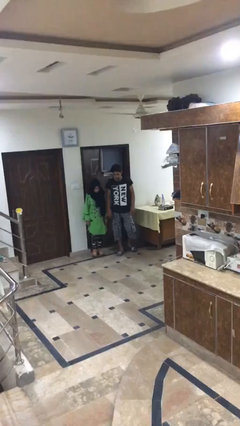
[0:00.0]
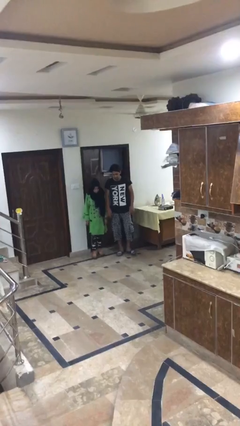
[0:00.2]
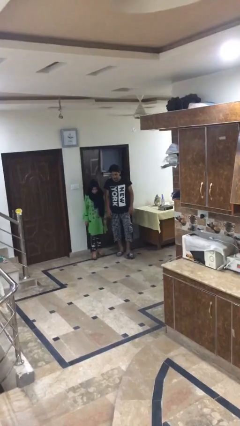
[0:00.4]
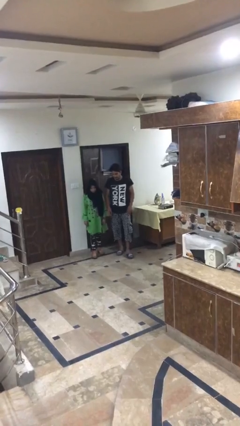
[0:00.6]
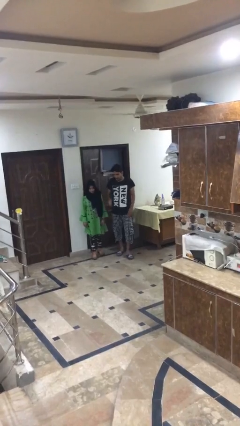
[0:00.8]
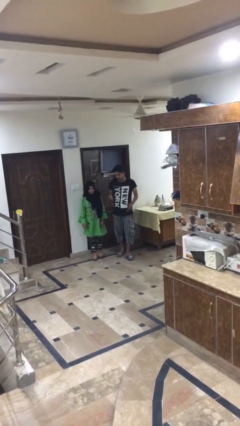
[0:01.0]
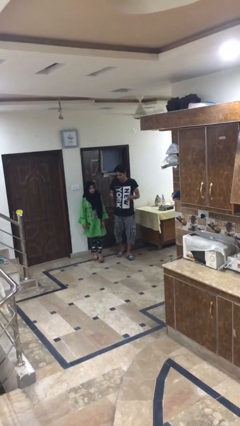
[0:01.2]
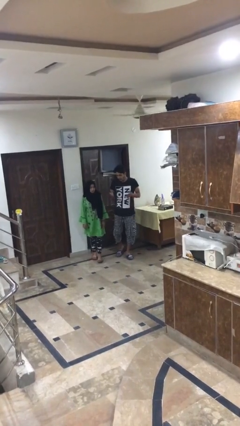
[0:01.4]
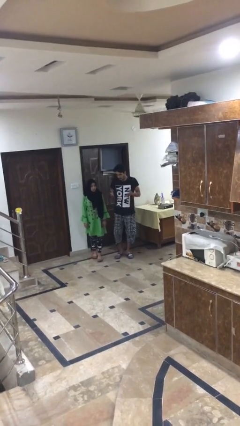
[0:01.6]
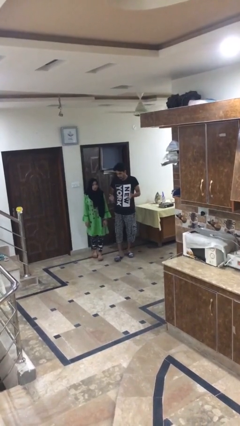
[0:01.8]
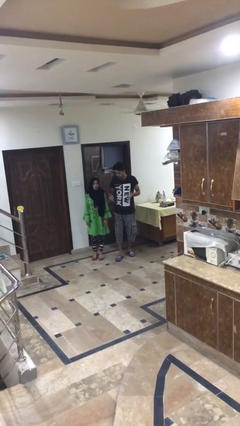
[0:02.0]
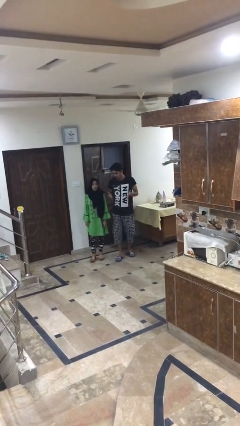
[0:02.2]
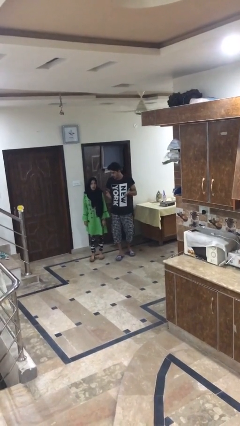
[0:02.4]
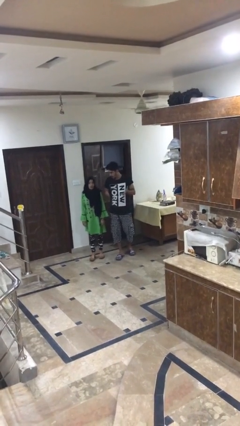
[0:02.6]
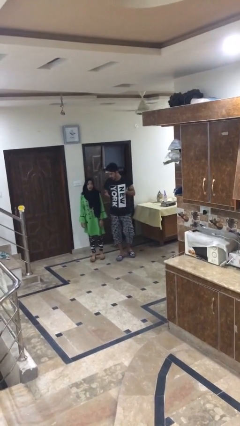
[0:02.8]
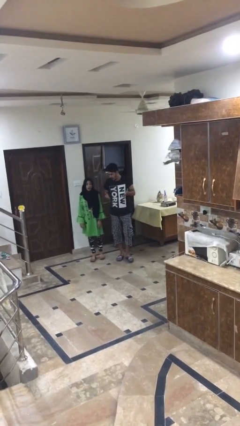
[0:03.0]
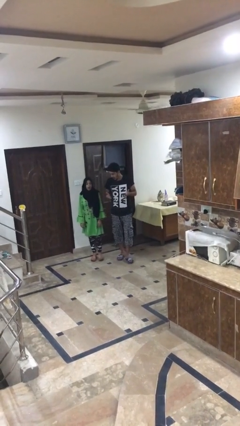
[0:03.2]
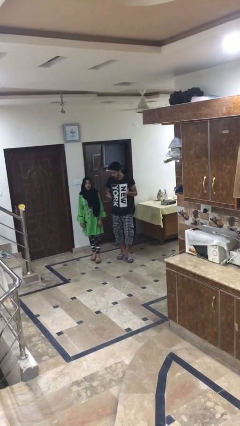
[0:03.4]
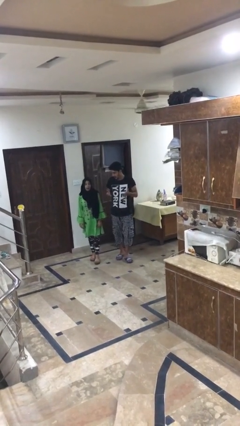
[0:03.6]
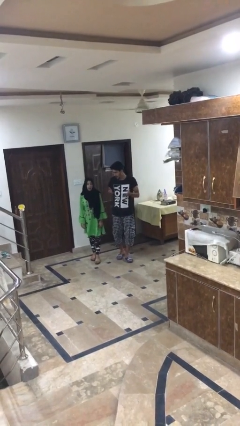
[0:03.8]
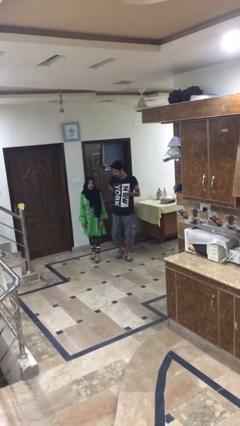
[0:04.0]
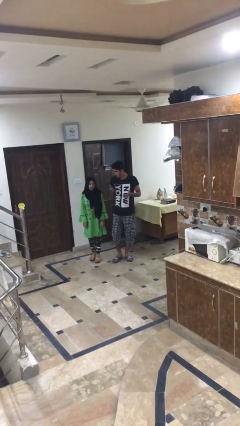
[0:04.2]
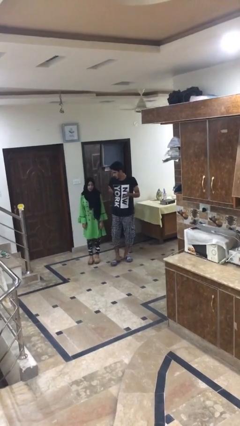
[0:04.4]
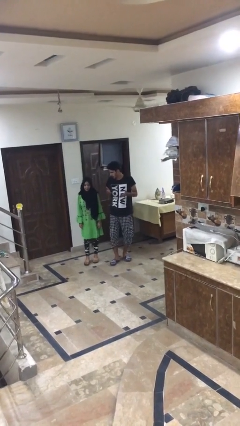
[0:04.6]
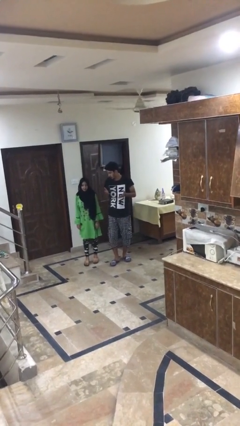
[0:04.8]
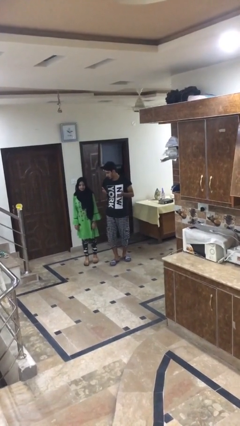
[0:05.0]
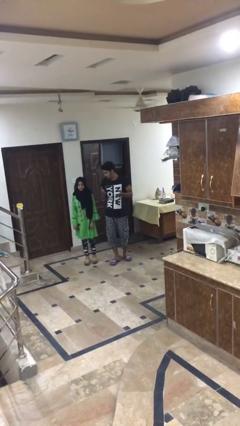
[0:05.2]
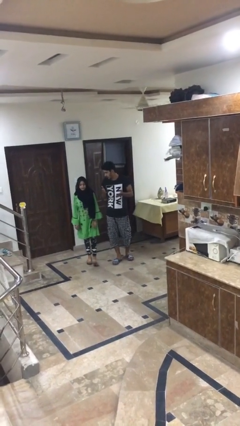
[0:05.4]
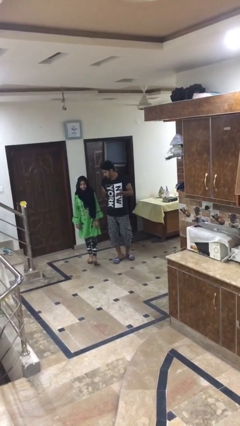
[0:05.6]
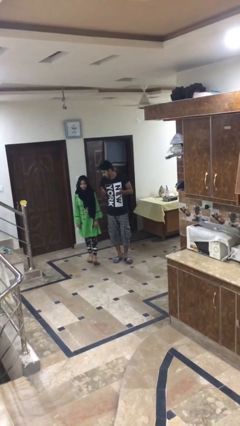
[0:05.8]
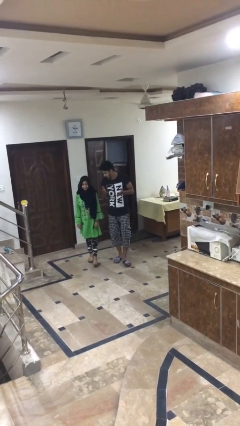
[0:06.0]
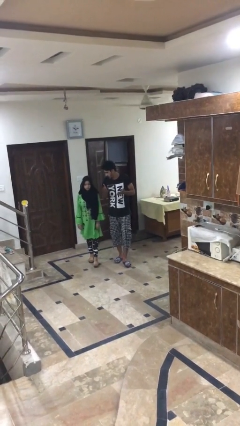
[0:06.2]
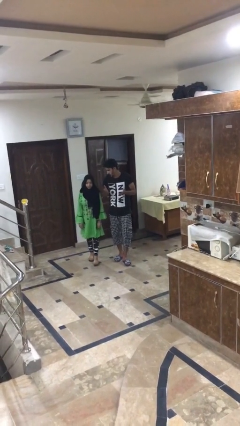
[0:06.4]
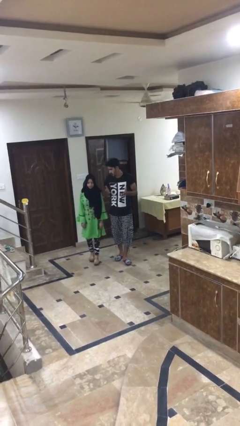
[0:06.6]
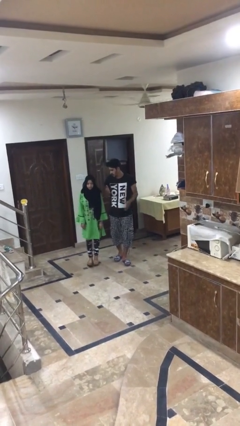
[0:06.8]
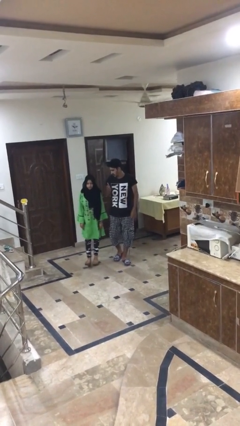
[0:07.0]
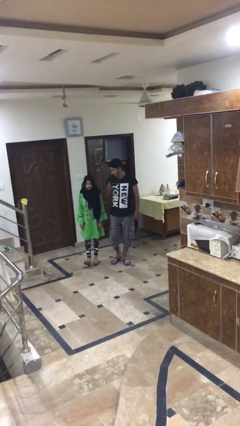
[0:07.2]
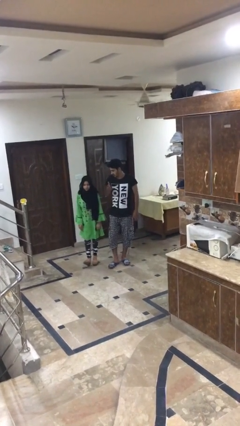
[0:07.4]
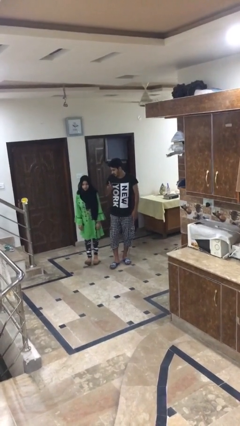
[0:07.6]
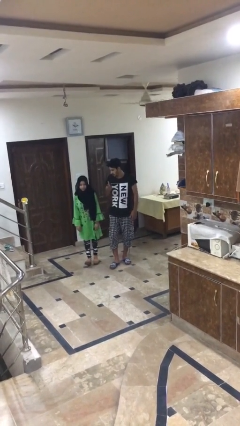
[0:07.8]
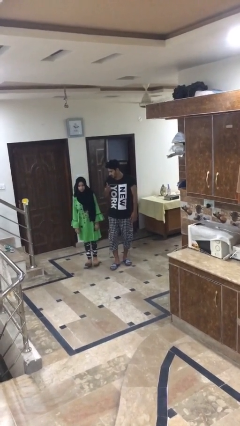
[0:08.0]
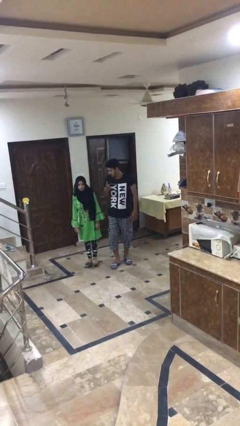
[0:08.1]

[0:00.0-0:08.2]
person talks to person

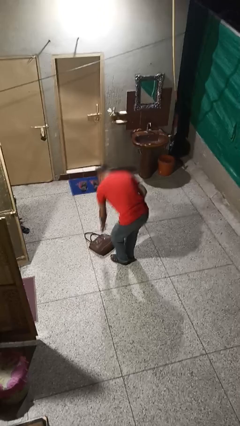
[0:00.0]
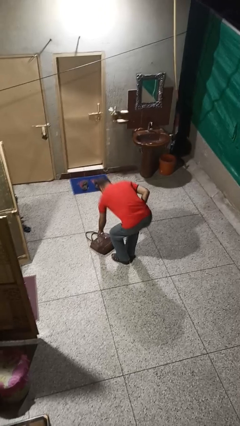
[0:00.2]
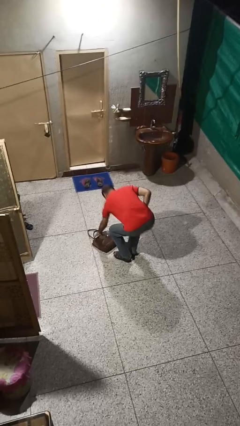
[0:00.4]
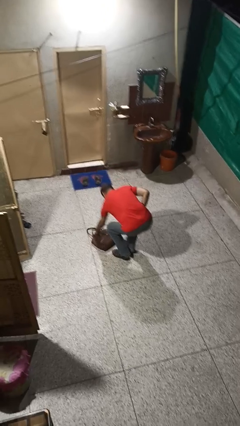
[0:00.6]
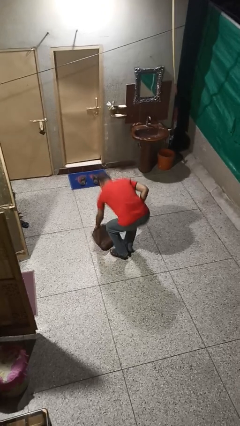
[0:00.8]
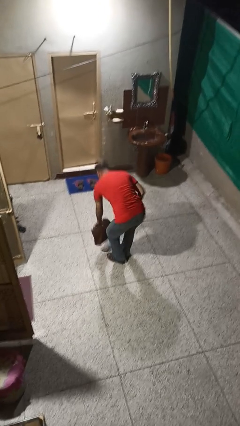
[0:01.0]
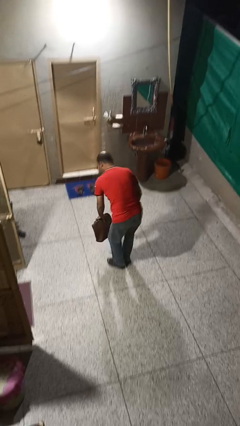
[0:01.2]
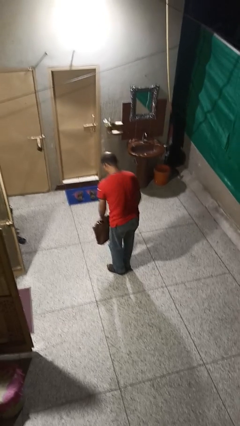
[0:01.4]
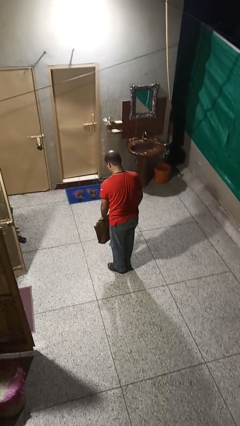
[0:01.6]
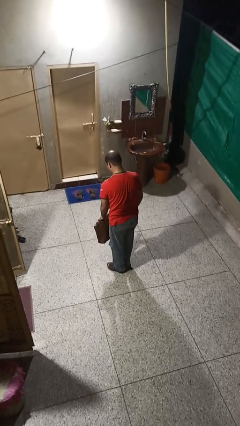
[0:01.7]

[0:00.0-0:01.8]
person picks up object from floor

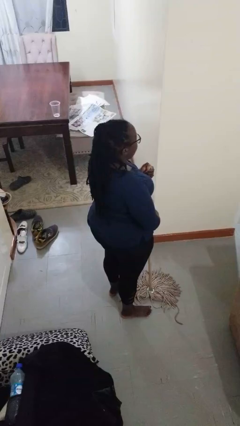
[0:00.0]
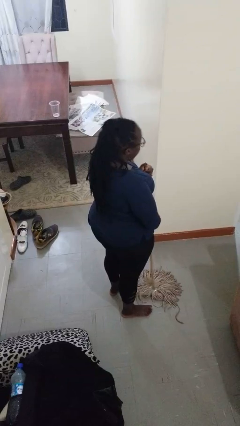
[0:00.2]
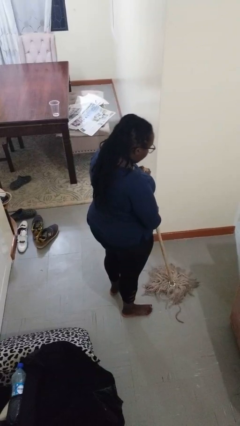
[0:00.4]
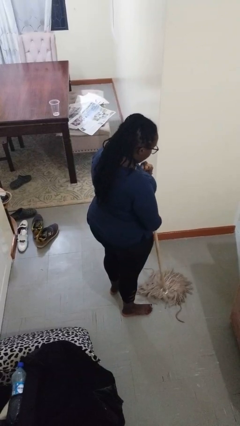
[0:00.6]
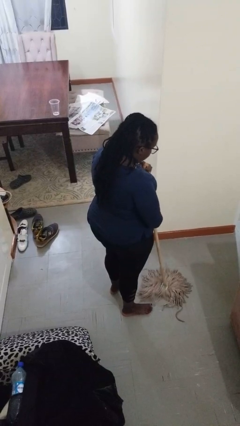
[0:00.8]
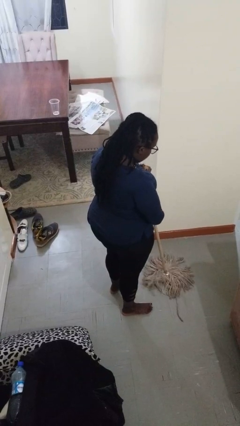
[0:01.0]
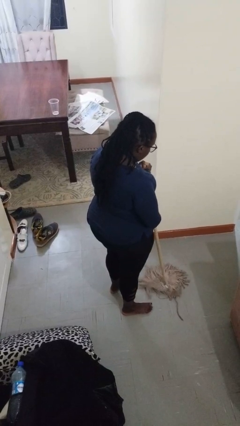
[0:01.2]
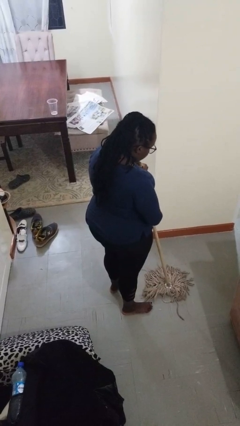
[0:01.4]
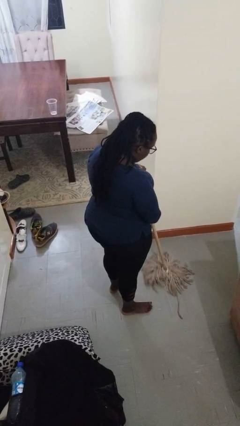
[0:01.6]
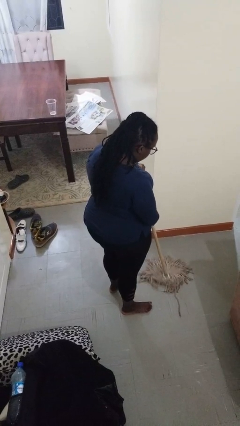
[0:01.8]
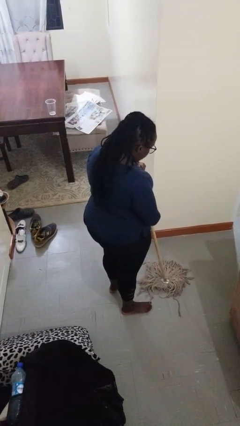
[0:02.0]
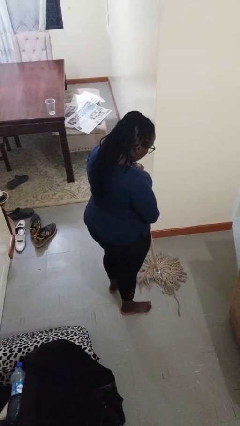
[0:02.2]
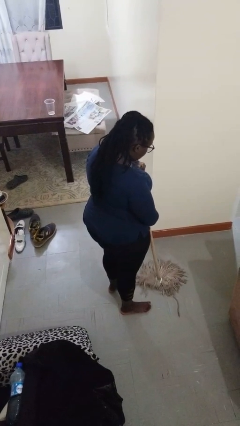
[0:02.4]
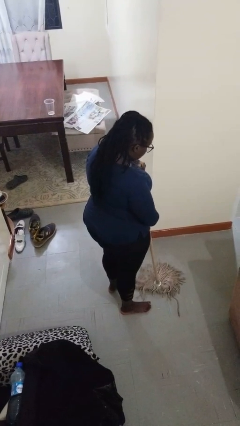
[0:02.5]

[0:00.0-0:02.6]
person mops

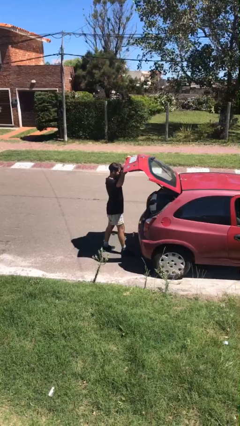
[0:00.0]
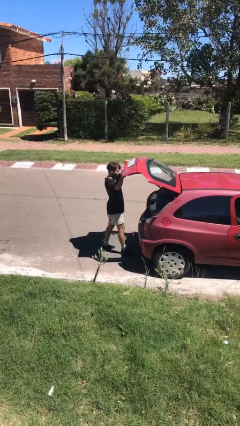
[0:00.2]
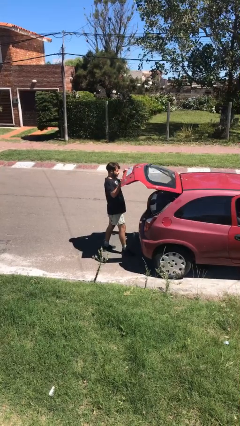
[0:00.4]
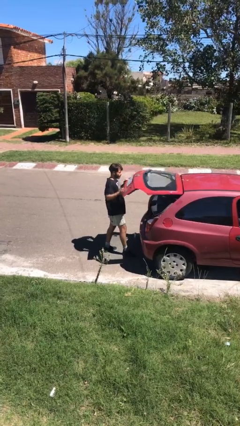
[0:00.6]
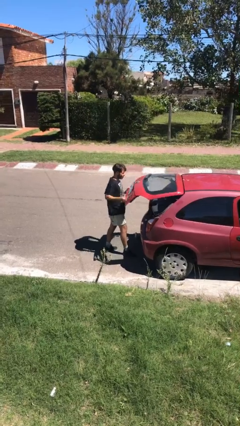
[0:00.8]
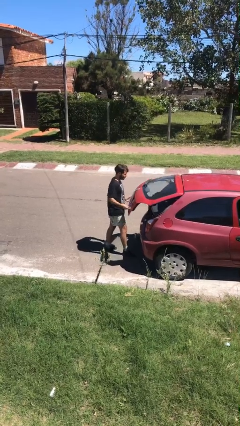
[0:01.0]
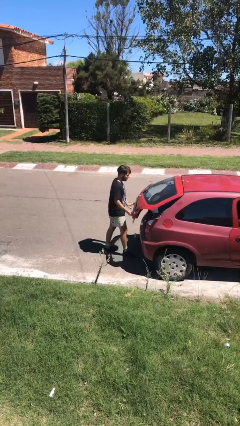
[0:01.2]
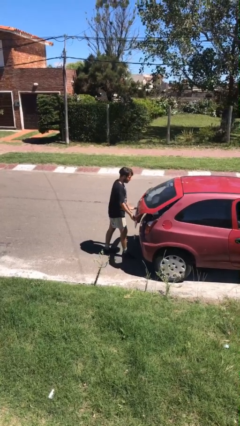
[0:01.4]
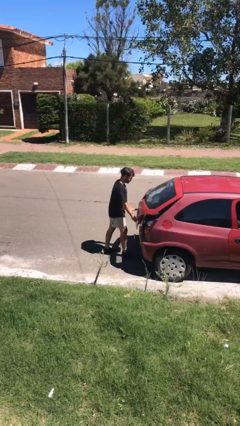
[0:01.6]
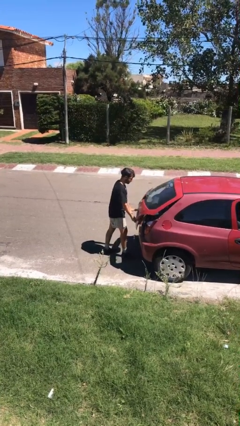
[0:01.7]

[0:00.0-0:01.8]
person closes car trunk

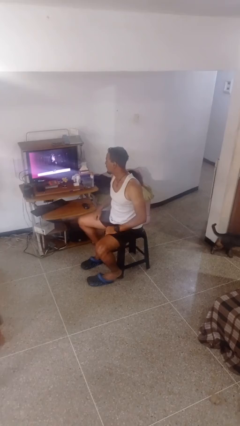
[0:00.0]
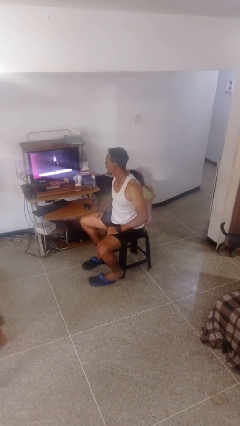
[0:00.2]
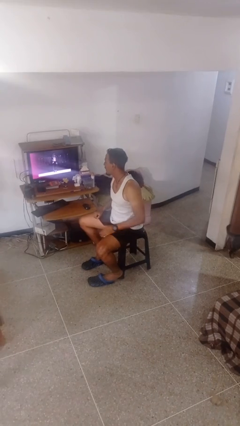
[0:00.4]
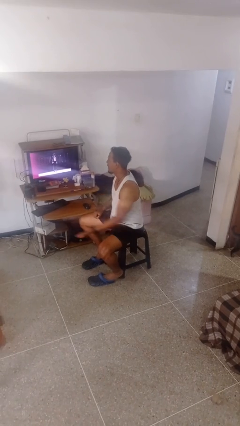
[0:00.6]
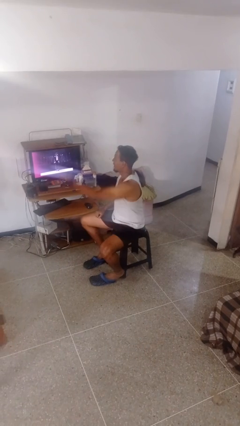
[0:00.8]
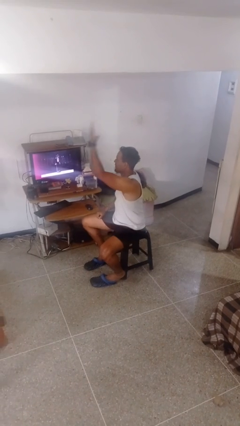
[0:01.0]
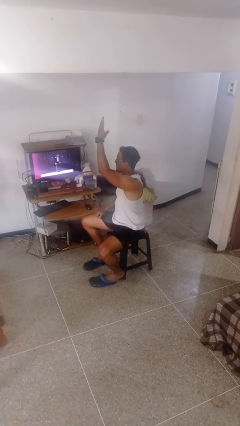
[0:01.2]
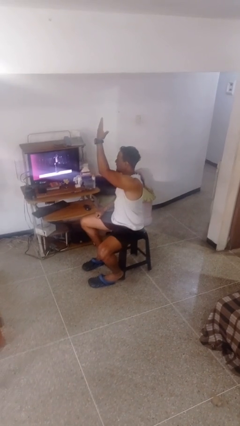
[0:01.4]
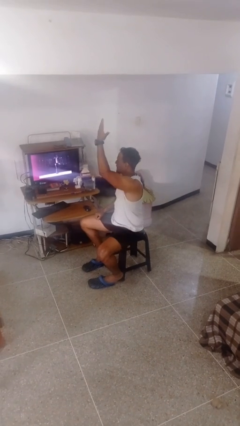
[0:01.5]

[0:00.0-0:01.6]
person gestures swipe up

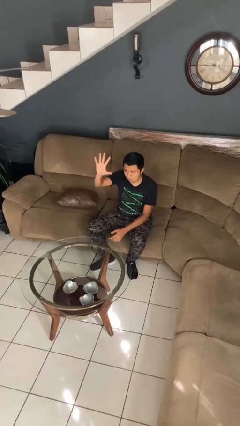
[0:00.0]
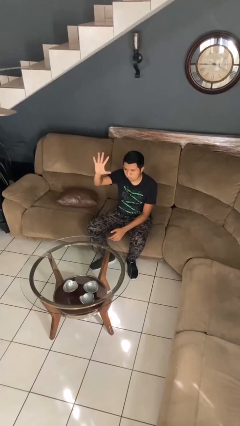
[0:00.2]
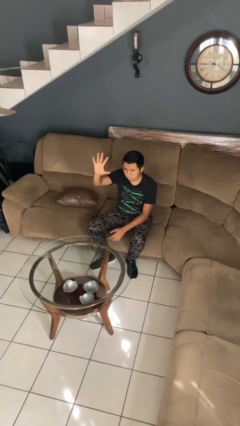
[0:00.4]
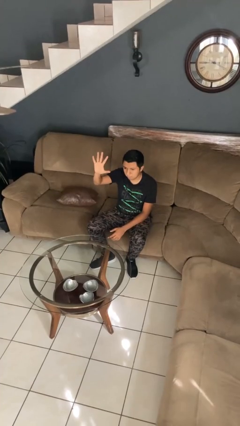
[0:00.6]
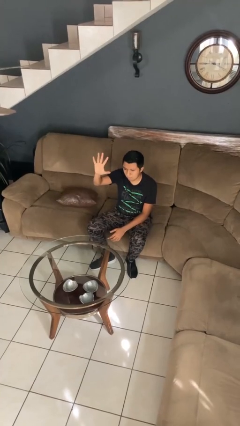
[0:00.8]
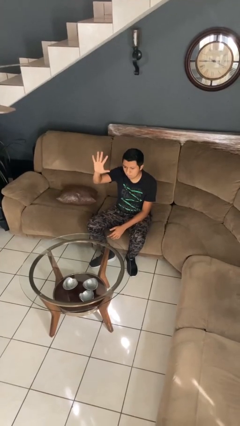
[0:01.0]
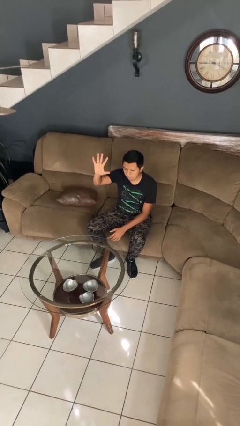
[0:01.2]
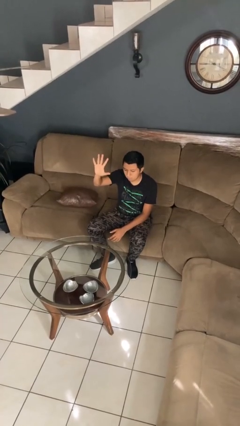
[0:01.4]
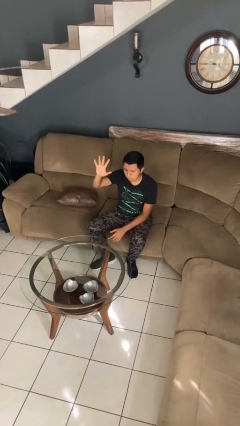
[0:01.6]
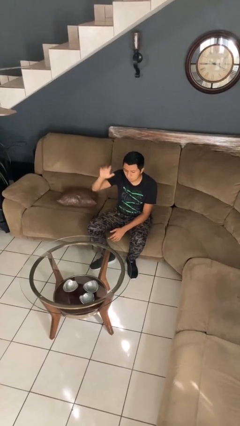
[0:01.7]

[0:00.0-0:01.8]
person gestures number five
